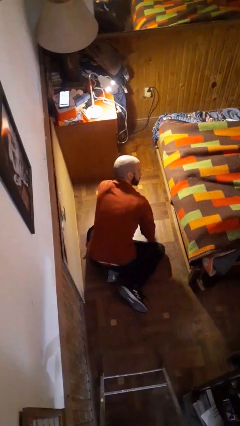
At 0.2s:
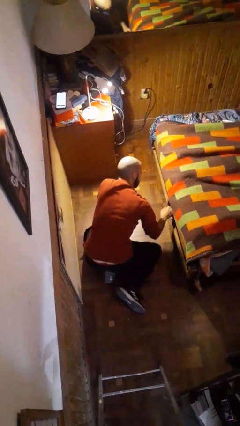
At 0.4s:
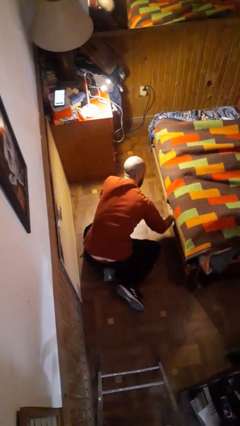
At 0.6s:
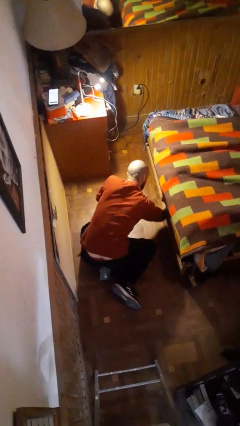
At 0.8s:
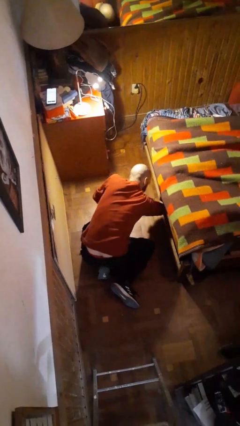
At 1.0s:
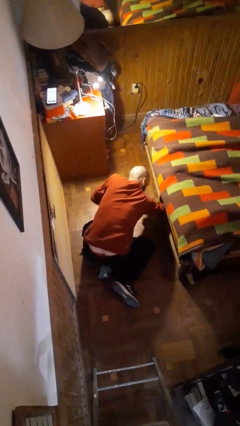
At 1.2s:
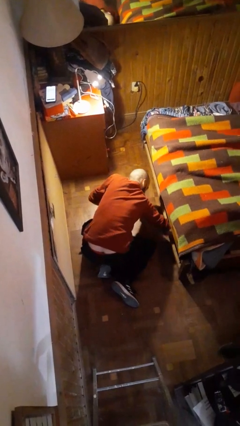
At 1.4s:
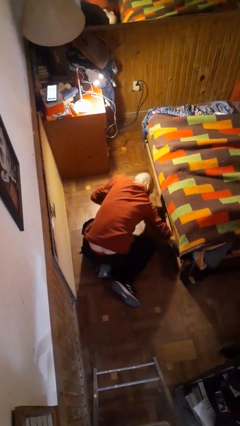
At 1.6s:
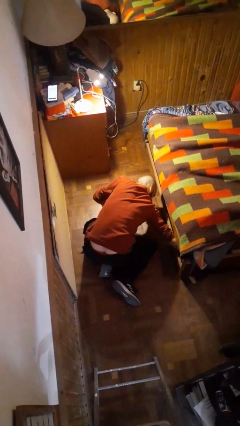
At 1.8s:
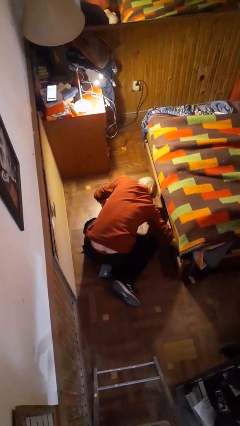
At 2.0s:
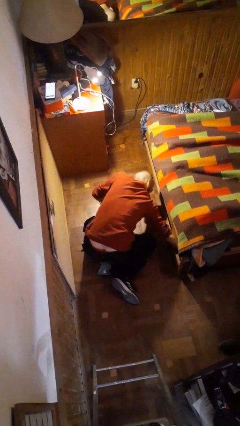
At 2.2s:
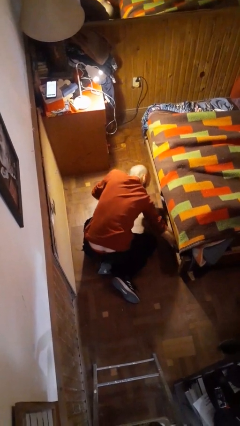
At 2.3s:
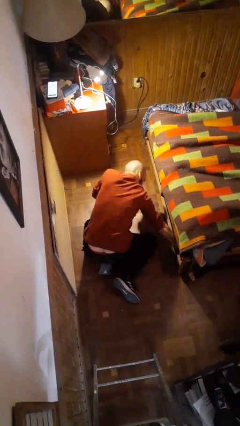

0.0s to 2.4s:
person searches under bed

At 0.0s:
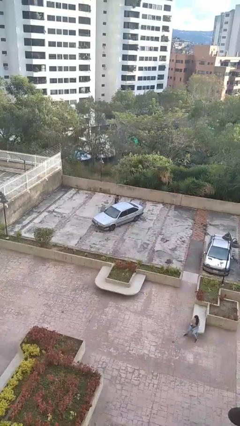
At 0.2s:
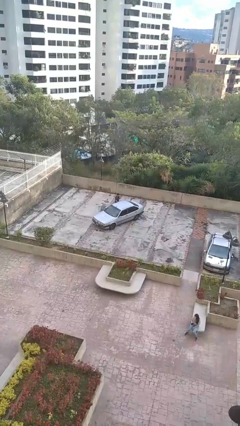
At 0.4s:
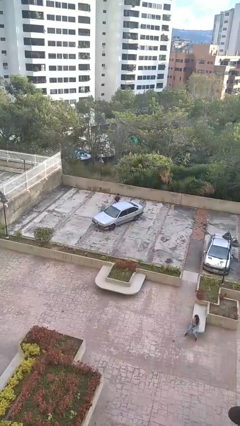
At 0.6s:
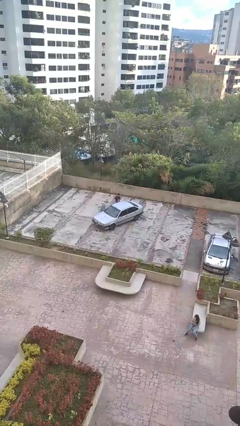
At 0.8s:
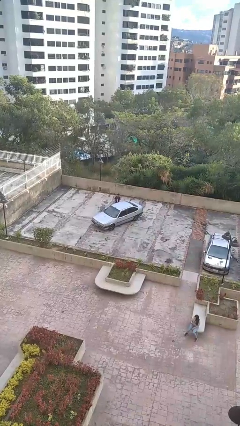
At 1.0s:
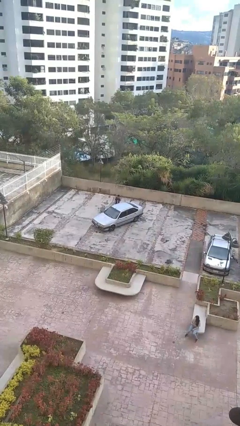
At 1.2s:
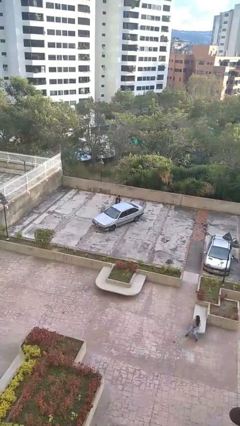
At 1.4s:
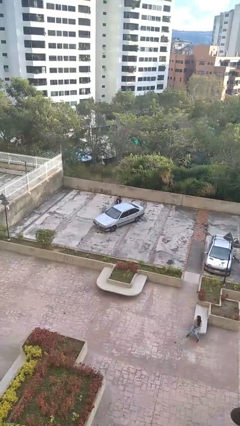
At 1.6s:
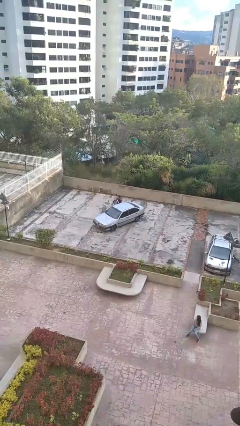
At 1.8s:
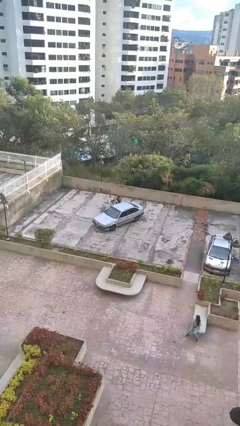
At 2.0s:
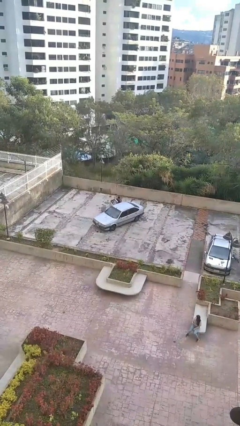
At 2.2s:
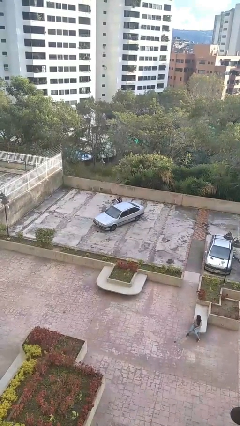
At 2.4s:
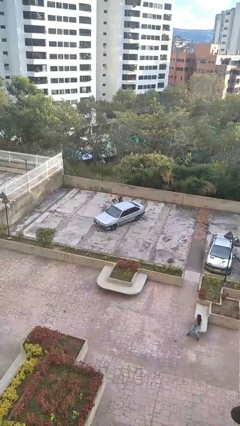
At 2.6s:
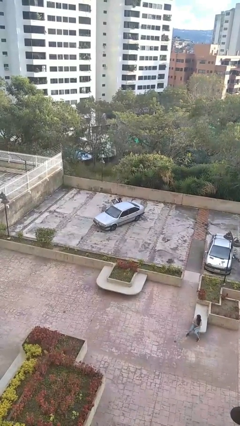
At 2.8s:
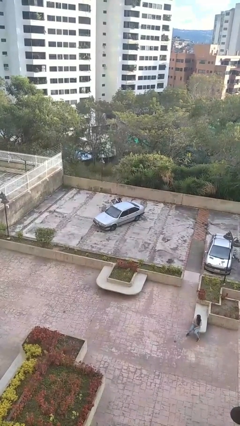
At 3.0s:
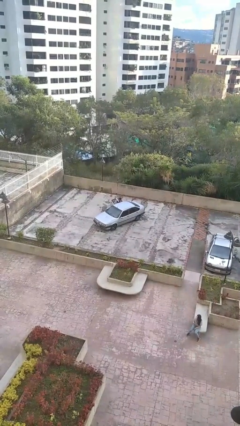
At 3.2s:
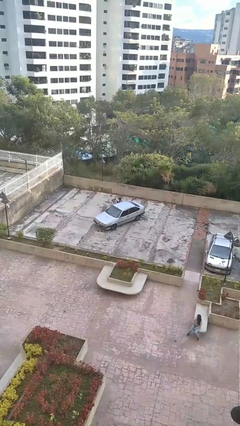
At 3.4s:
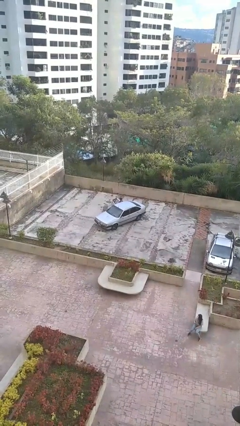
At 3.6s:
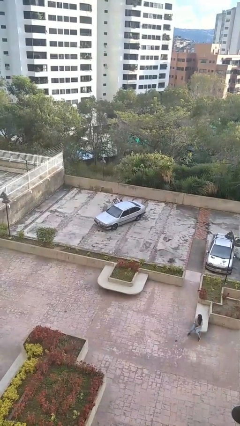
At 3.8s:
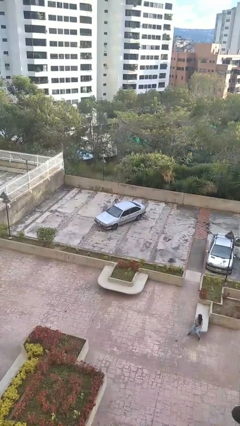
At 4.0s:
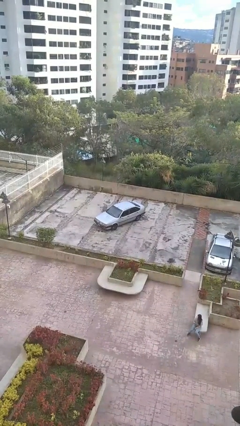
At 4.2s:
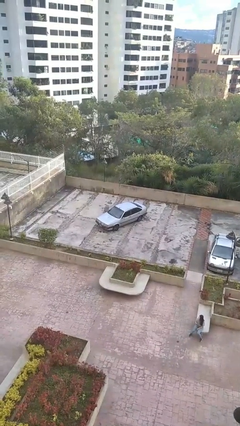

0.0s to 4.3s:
car picks up person

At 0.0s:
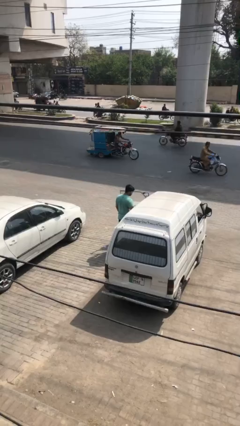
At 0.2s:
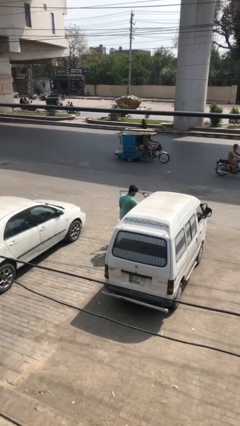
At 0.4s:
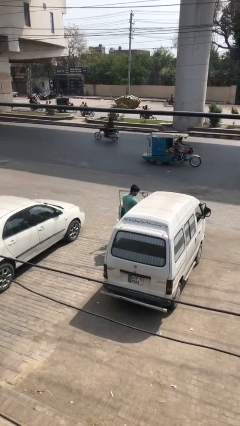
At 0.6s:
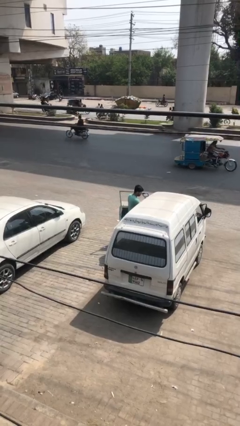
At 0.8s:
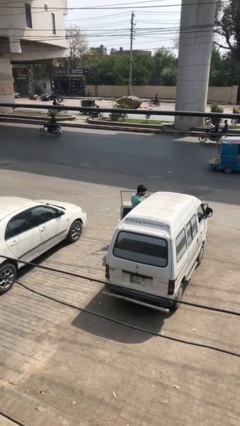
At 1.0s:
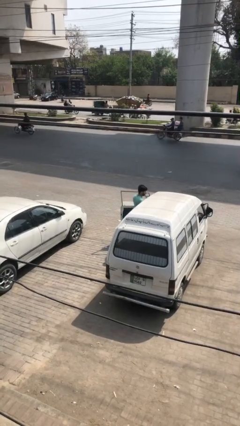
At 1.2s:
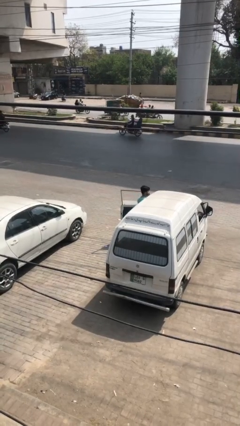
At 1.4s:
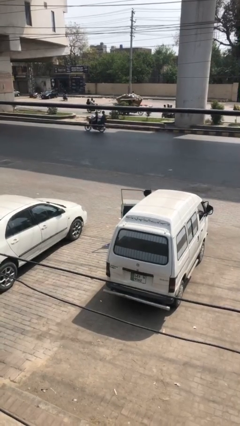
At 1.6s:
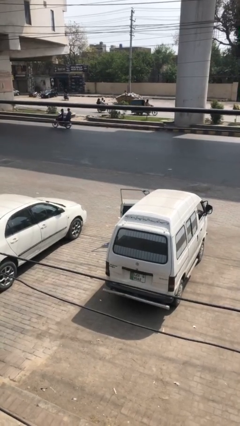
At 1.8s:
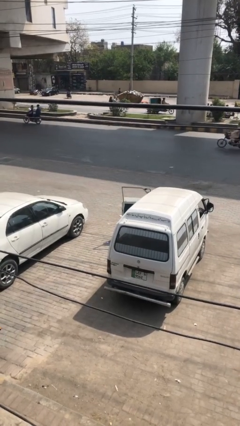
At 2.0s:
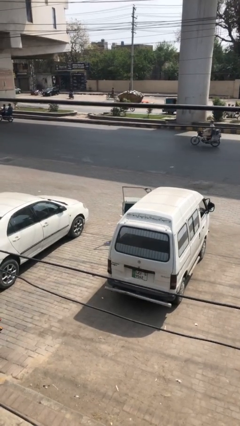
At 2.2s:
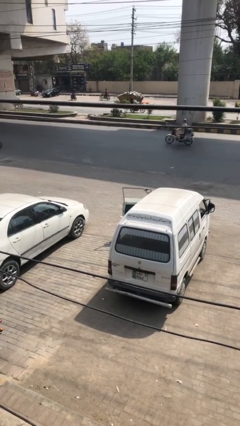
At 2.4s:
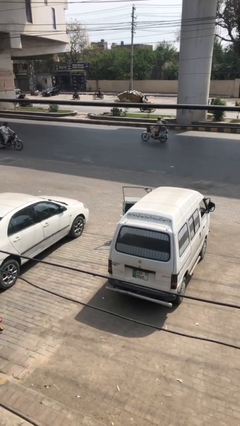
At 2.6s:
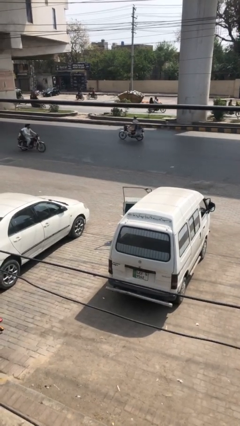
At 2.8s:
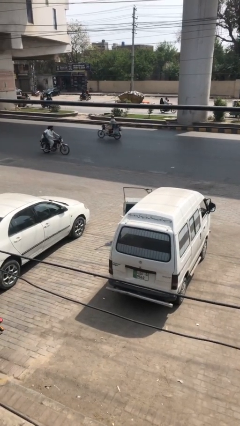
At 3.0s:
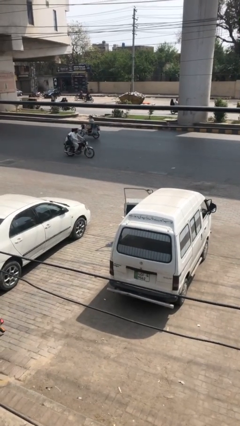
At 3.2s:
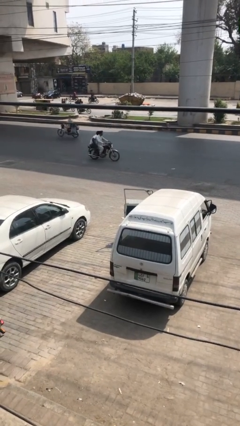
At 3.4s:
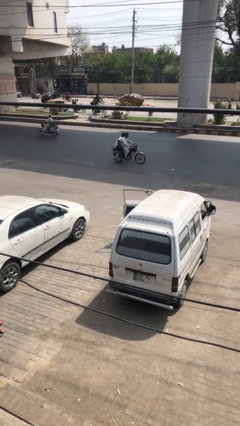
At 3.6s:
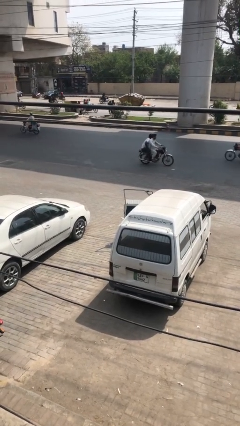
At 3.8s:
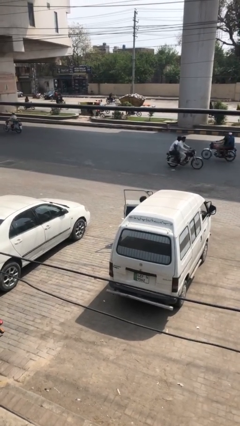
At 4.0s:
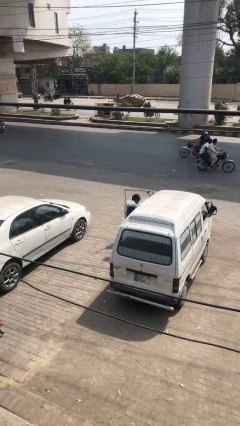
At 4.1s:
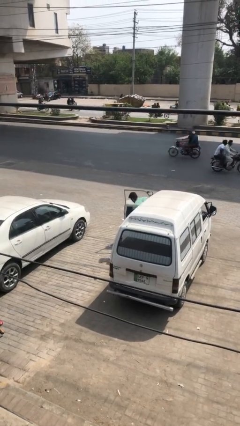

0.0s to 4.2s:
person enters car

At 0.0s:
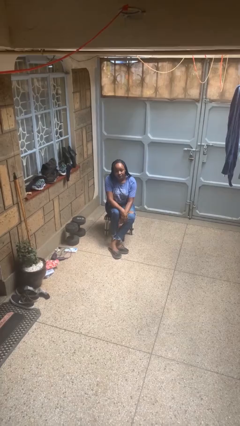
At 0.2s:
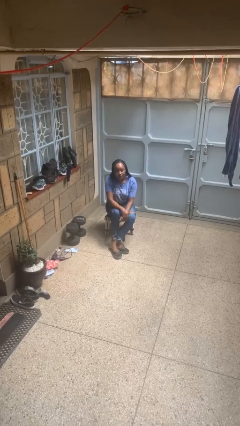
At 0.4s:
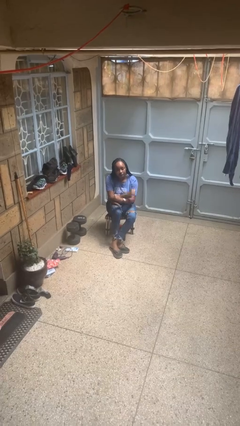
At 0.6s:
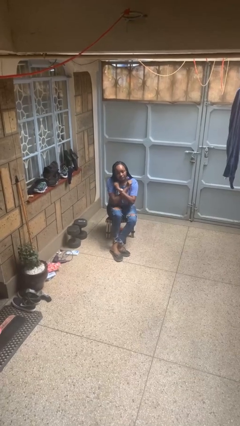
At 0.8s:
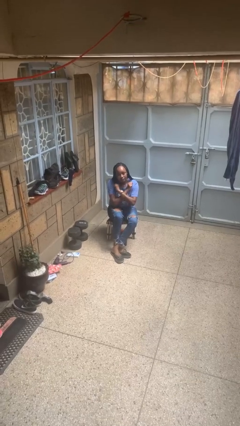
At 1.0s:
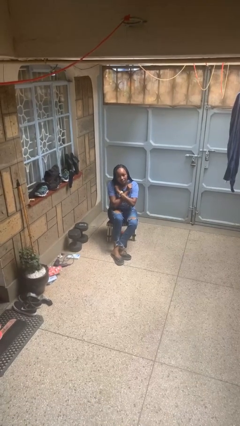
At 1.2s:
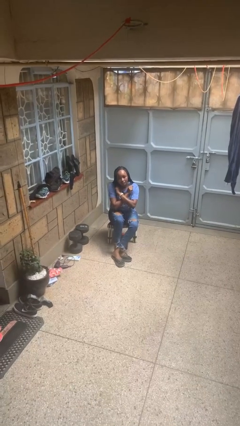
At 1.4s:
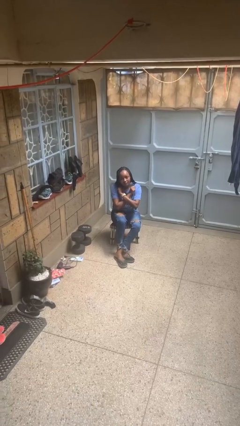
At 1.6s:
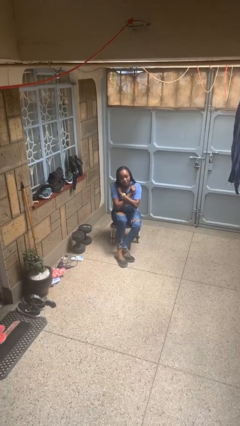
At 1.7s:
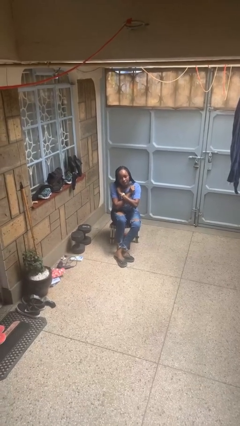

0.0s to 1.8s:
person gestures arms x

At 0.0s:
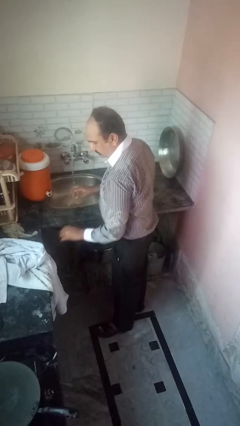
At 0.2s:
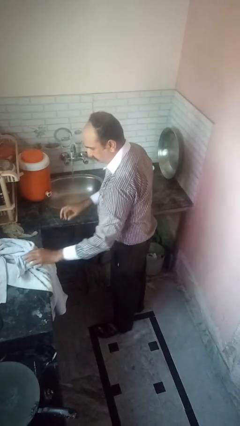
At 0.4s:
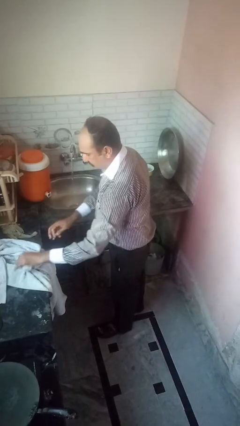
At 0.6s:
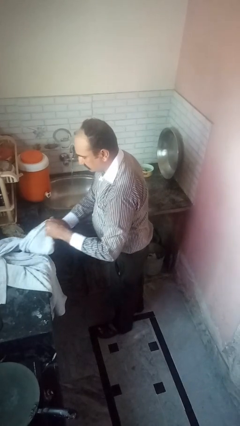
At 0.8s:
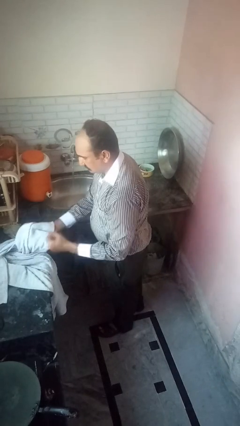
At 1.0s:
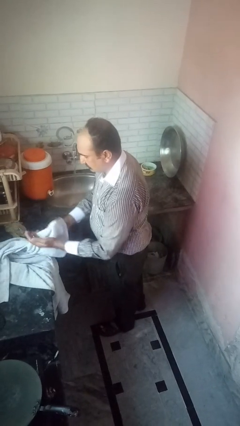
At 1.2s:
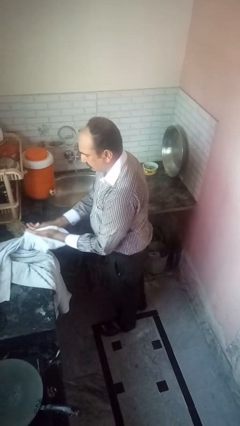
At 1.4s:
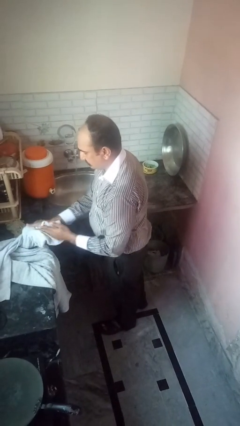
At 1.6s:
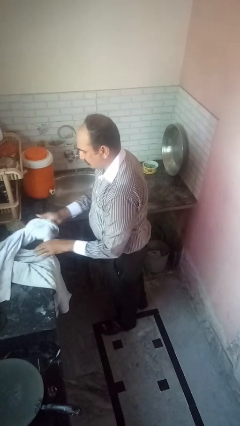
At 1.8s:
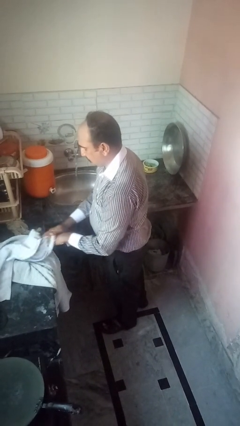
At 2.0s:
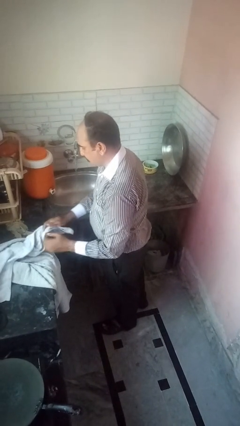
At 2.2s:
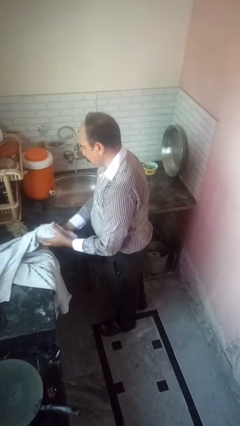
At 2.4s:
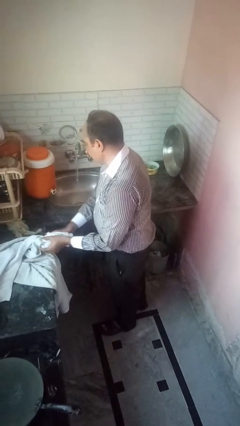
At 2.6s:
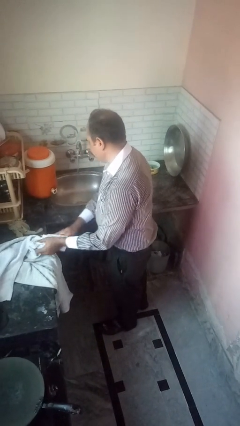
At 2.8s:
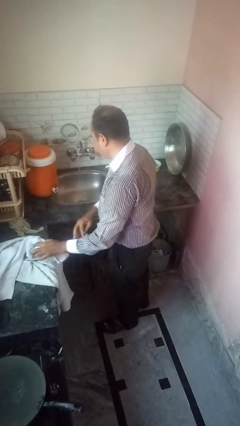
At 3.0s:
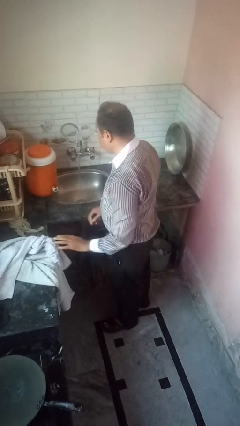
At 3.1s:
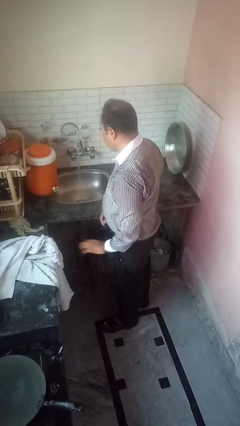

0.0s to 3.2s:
person dries hands with towel

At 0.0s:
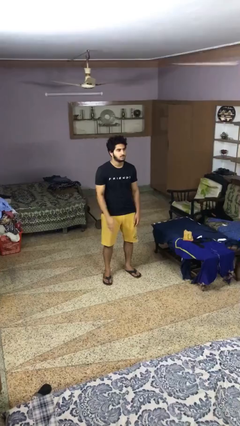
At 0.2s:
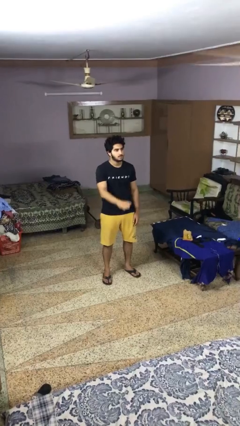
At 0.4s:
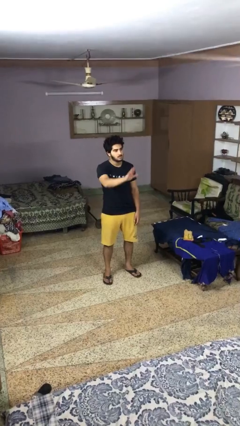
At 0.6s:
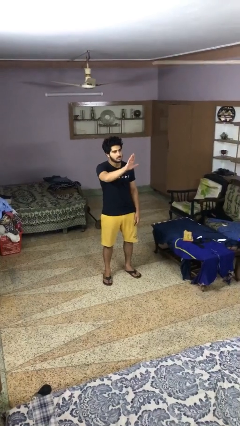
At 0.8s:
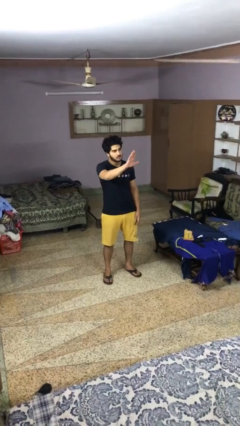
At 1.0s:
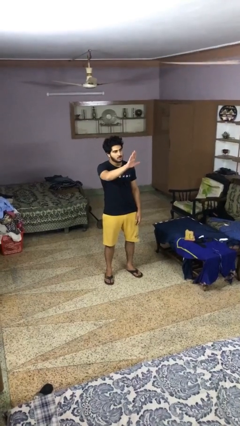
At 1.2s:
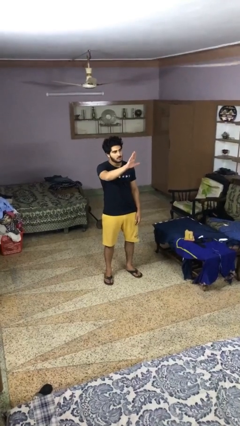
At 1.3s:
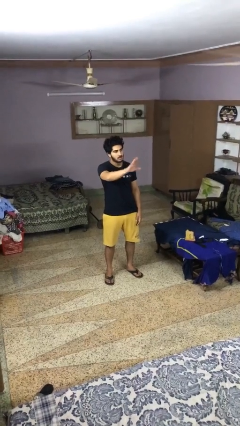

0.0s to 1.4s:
person gestures stop

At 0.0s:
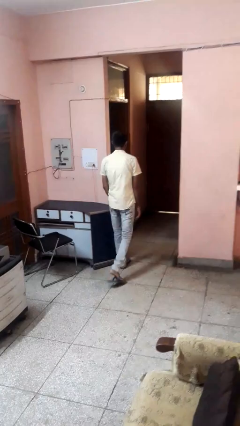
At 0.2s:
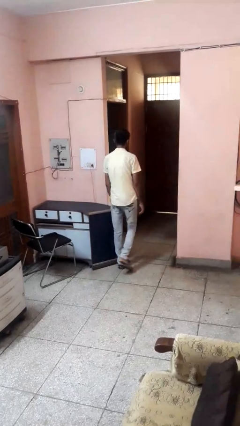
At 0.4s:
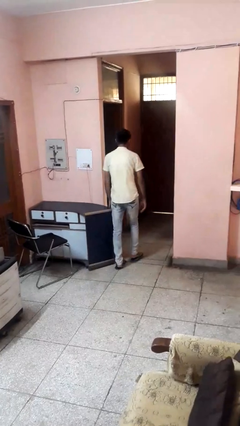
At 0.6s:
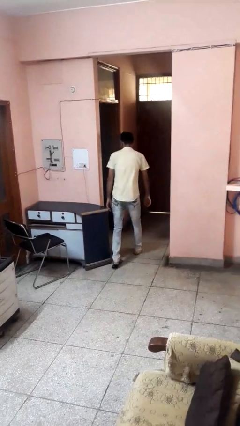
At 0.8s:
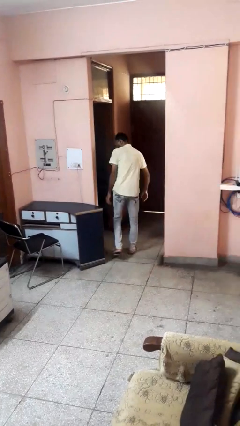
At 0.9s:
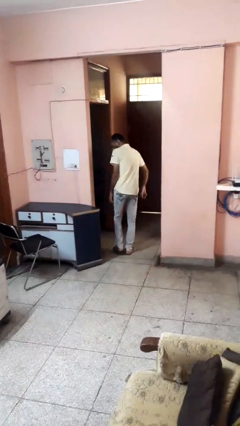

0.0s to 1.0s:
person bumps into table
